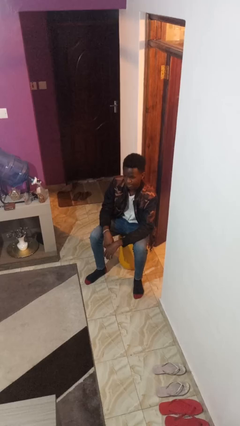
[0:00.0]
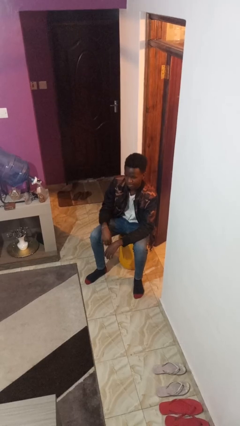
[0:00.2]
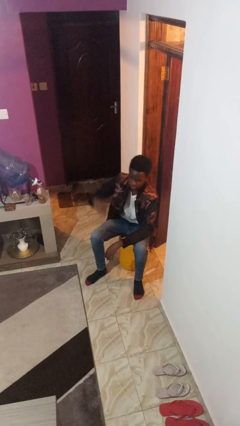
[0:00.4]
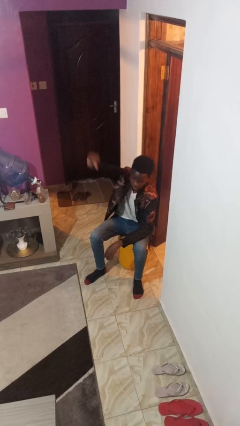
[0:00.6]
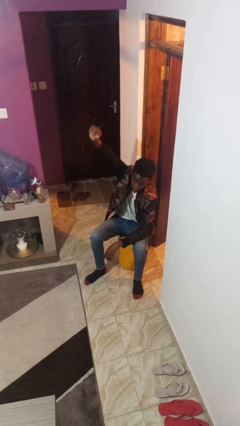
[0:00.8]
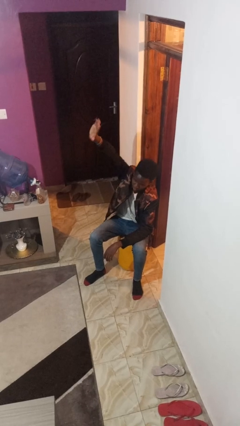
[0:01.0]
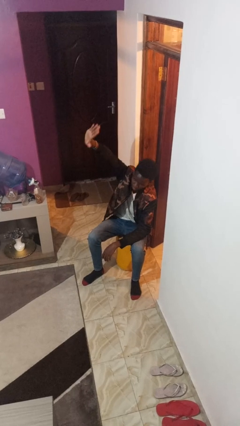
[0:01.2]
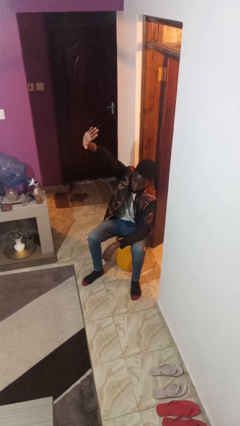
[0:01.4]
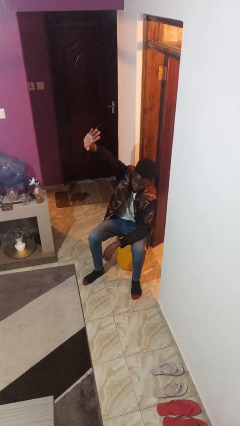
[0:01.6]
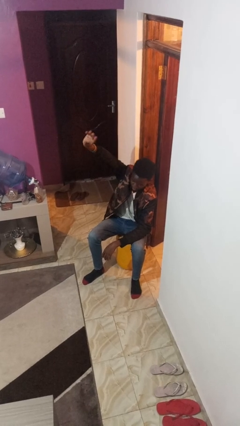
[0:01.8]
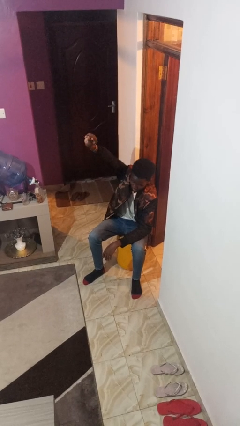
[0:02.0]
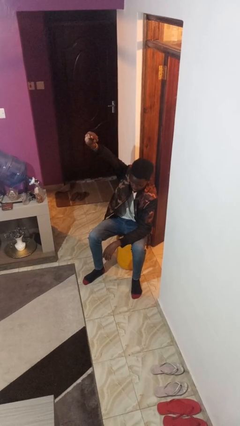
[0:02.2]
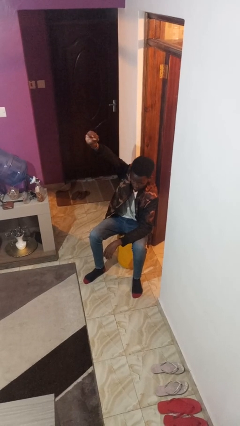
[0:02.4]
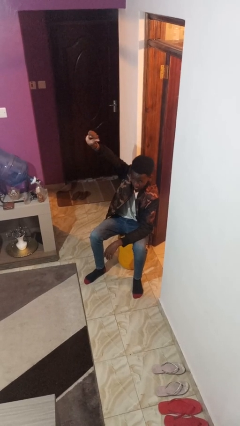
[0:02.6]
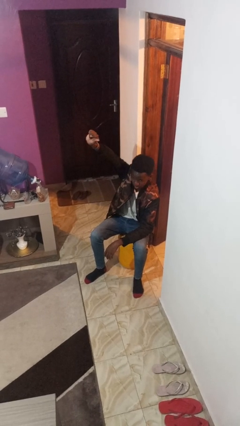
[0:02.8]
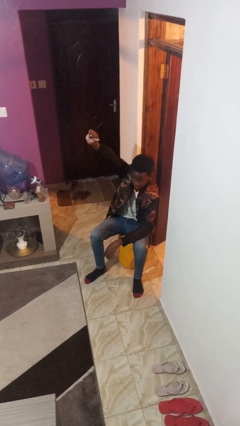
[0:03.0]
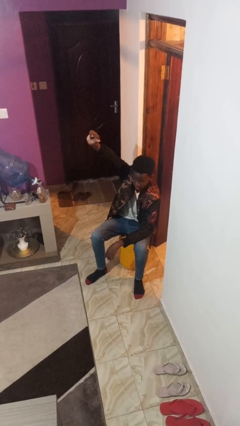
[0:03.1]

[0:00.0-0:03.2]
person gestures raise hand

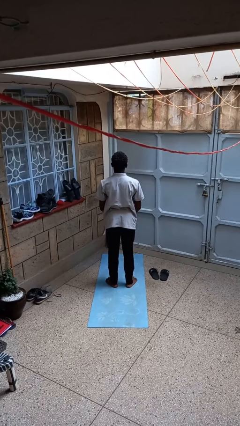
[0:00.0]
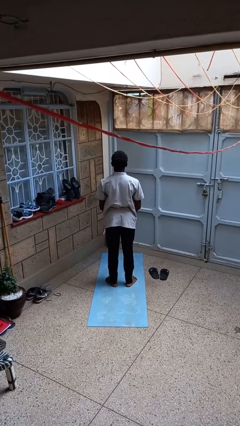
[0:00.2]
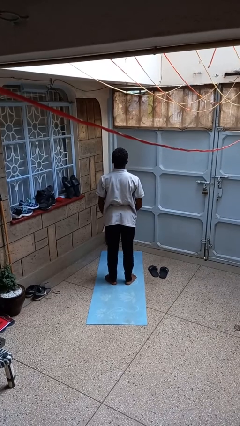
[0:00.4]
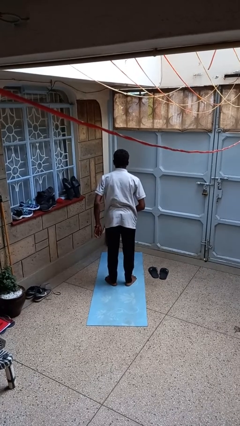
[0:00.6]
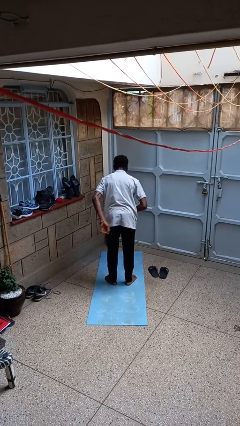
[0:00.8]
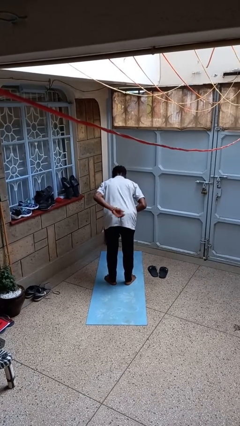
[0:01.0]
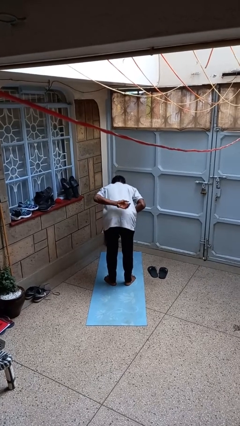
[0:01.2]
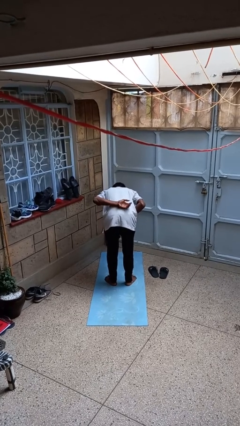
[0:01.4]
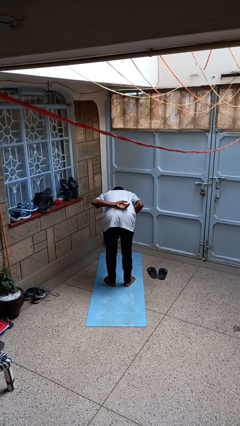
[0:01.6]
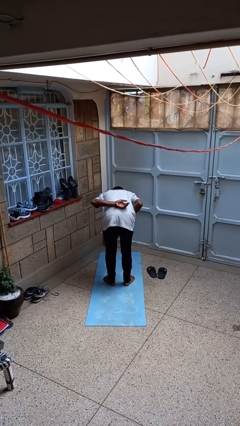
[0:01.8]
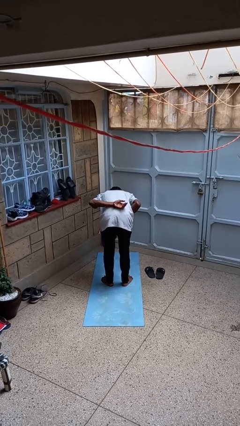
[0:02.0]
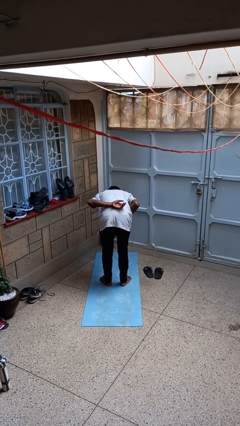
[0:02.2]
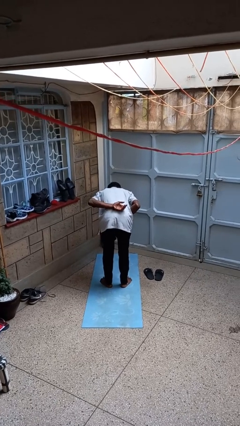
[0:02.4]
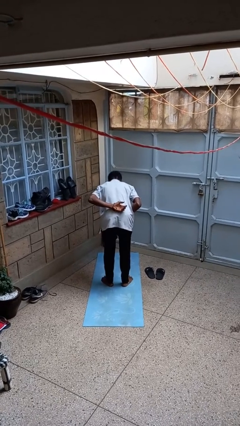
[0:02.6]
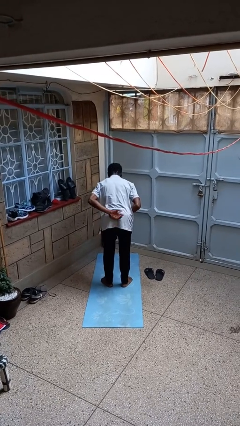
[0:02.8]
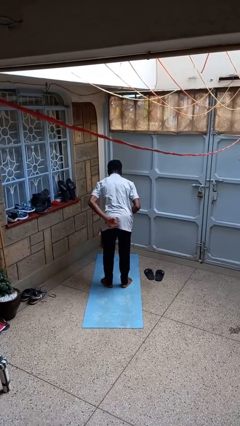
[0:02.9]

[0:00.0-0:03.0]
person bows

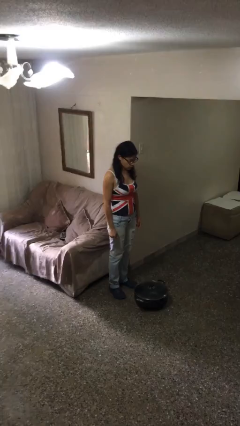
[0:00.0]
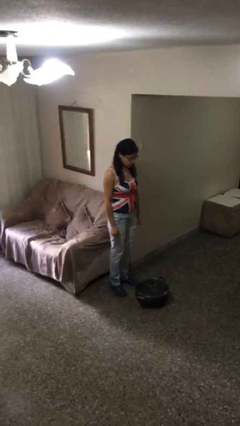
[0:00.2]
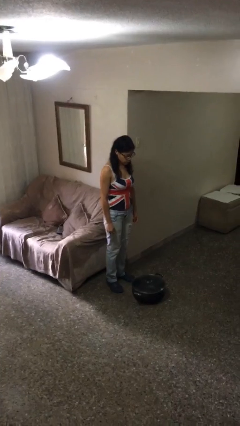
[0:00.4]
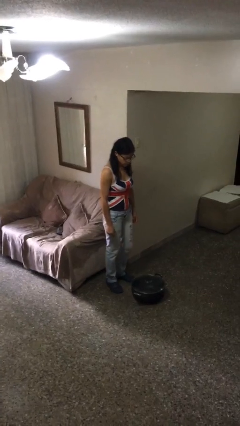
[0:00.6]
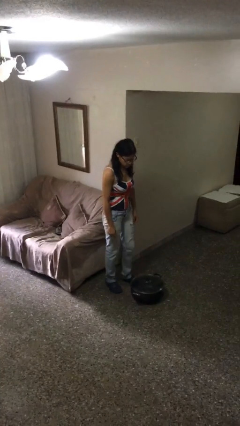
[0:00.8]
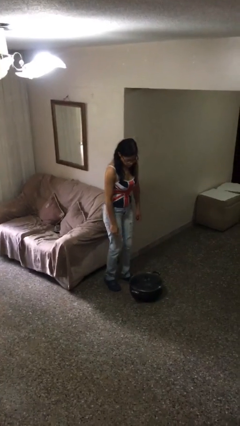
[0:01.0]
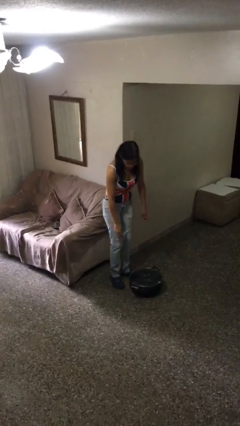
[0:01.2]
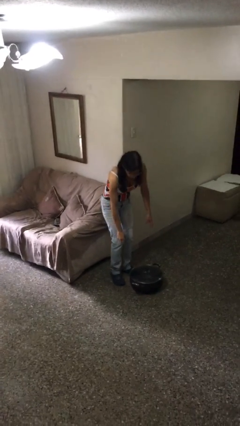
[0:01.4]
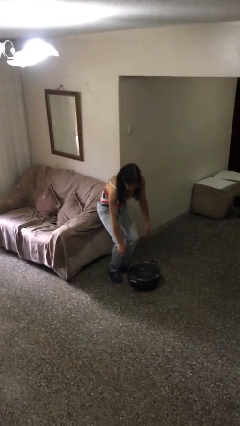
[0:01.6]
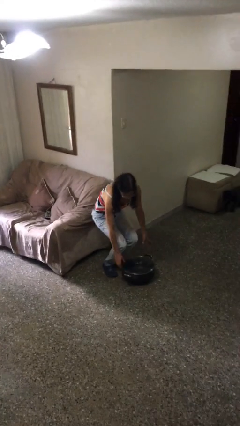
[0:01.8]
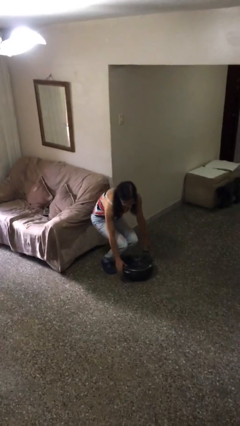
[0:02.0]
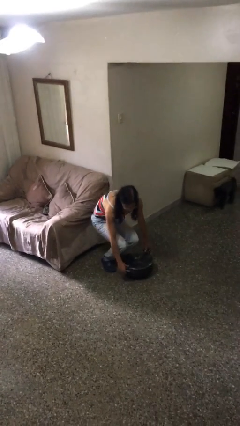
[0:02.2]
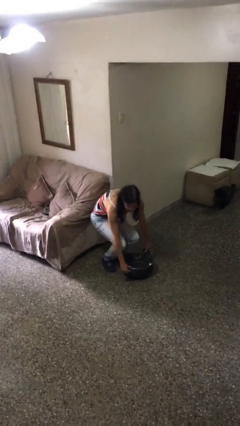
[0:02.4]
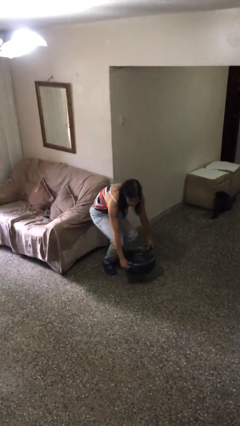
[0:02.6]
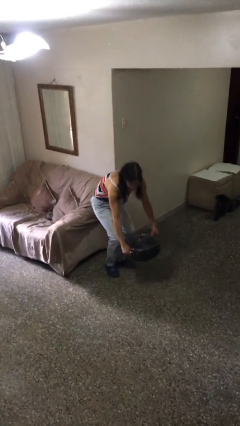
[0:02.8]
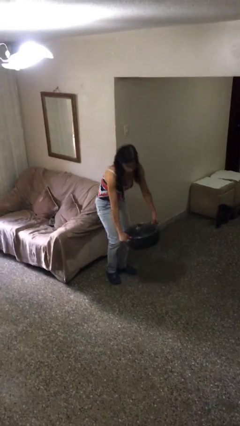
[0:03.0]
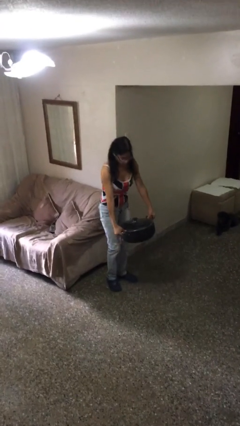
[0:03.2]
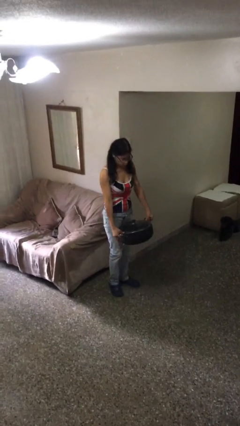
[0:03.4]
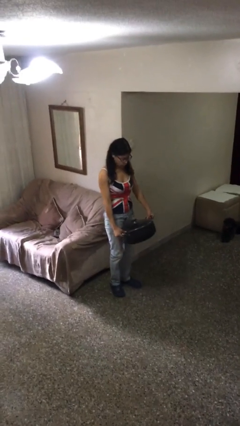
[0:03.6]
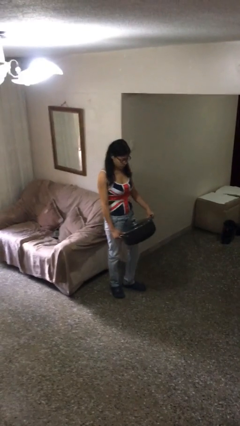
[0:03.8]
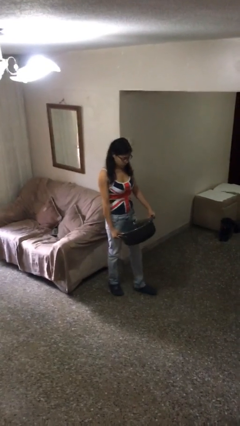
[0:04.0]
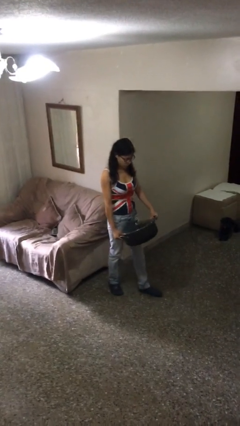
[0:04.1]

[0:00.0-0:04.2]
person picks up object from floor

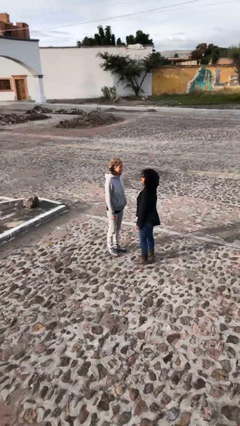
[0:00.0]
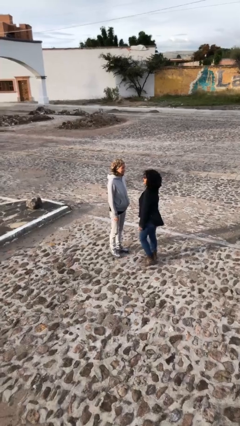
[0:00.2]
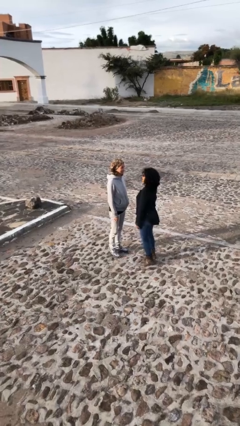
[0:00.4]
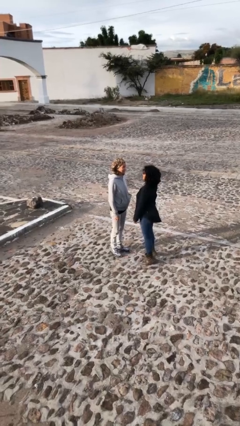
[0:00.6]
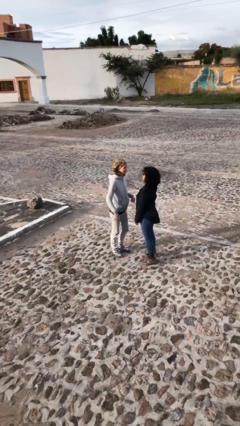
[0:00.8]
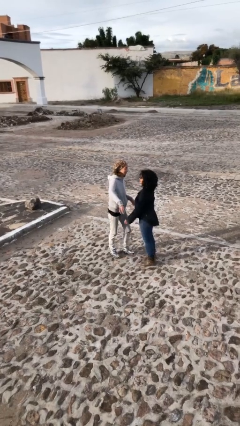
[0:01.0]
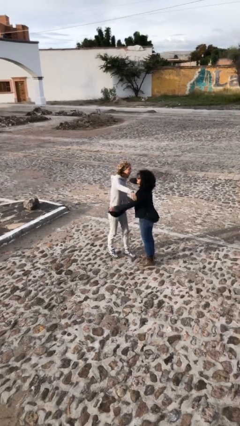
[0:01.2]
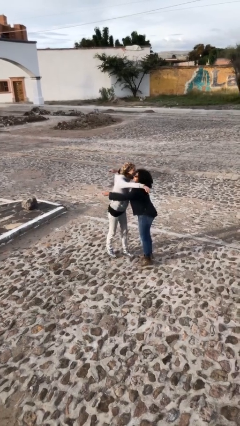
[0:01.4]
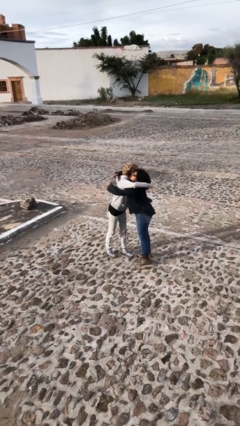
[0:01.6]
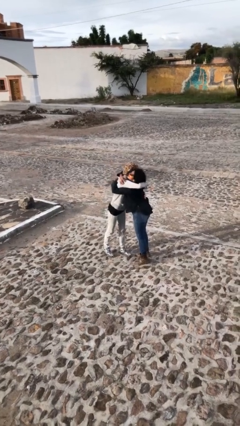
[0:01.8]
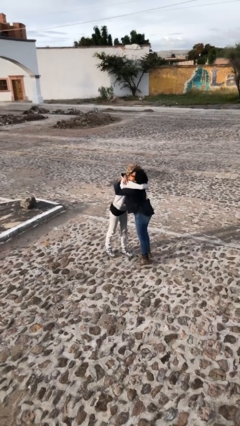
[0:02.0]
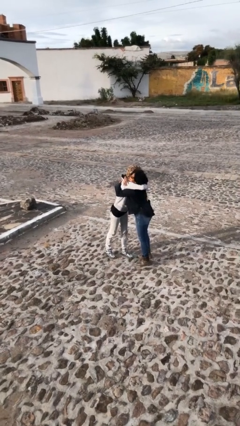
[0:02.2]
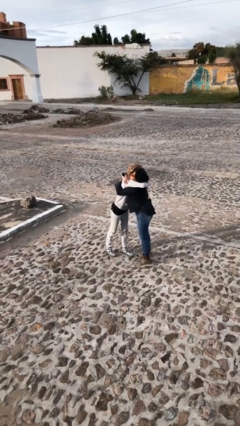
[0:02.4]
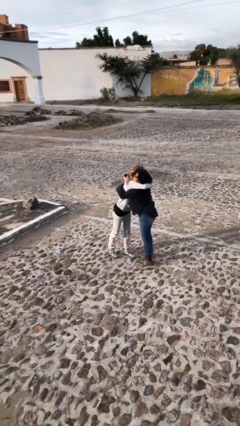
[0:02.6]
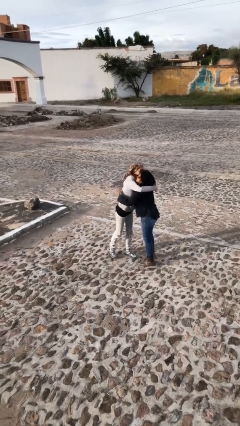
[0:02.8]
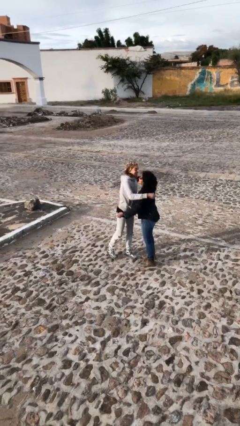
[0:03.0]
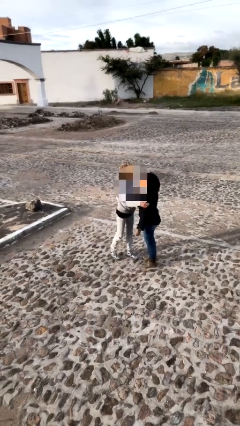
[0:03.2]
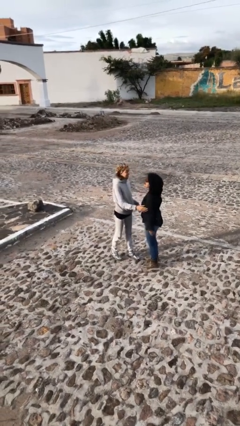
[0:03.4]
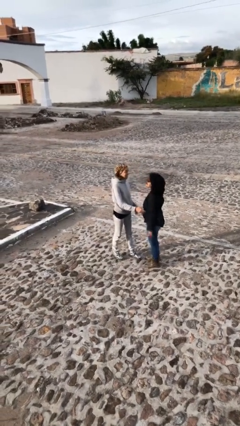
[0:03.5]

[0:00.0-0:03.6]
person embraces person

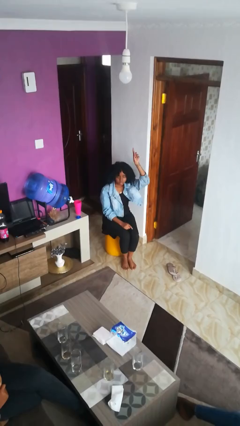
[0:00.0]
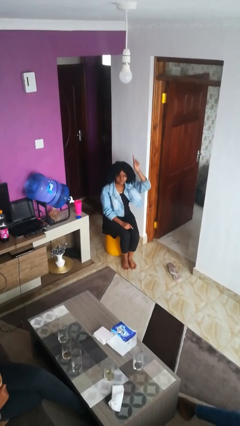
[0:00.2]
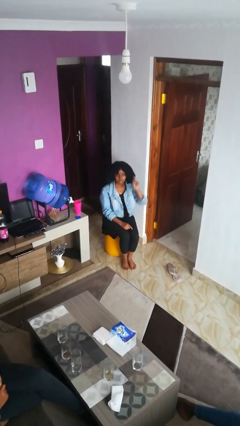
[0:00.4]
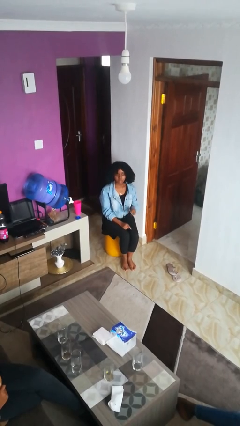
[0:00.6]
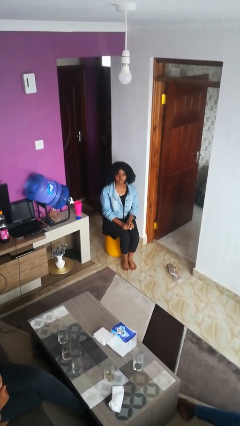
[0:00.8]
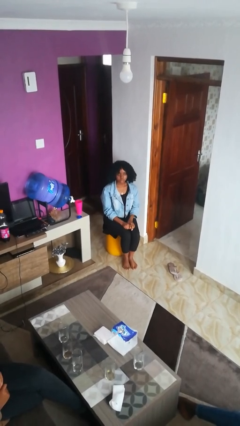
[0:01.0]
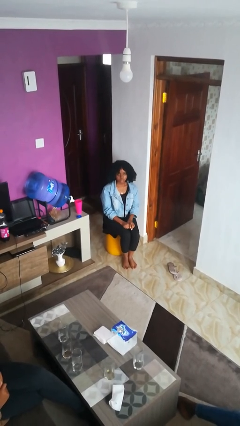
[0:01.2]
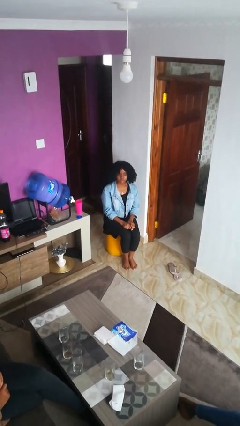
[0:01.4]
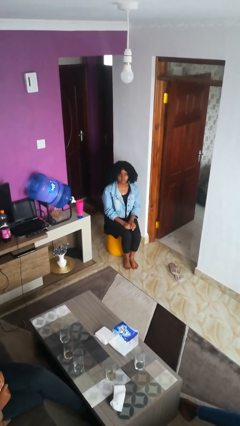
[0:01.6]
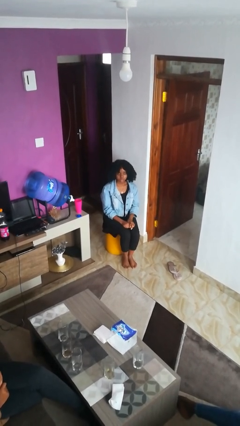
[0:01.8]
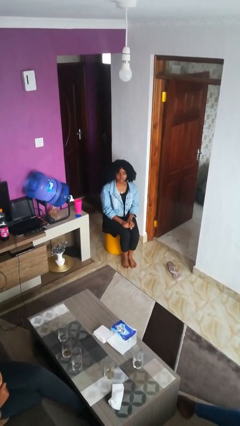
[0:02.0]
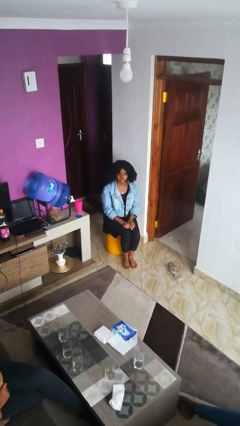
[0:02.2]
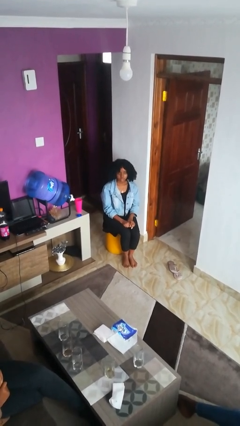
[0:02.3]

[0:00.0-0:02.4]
person gestures lower hand

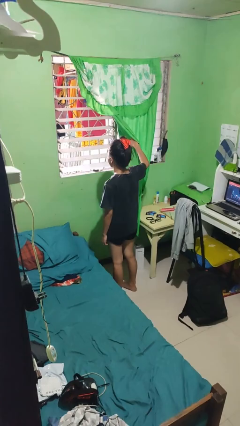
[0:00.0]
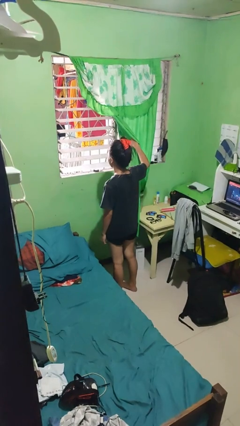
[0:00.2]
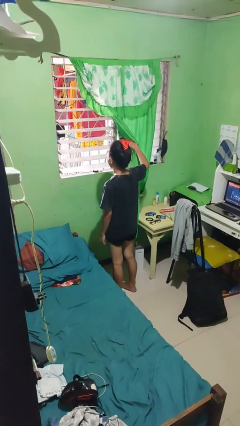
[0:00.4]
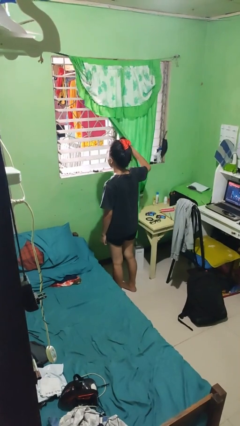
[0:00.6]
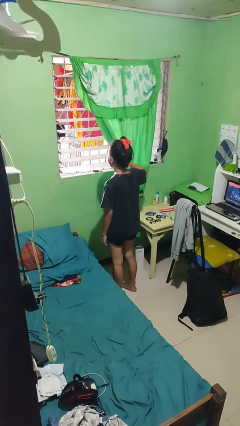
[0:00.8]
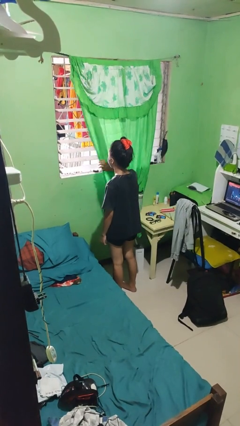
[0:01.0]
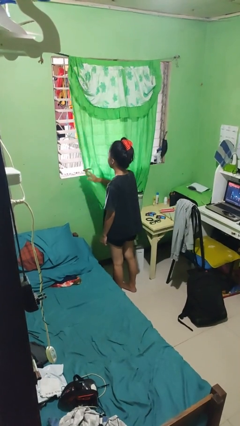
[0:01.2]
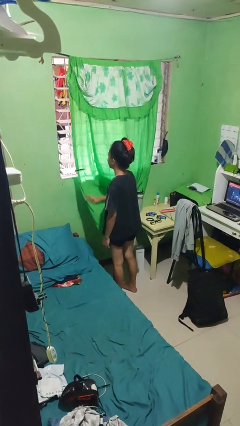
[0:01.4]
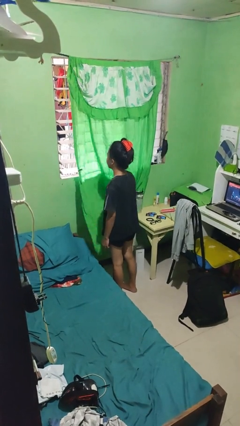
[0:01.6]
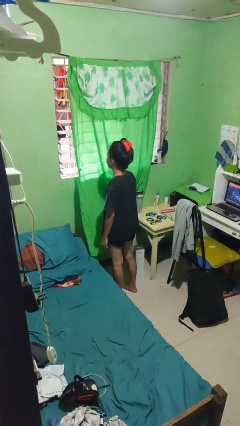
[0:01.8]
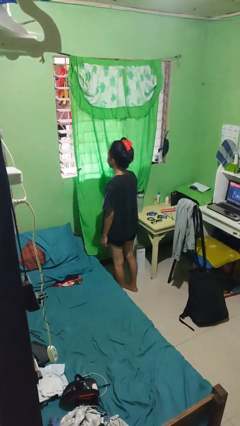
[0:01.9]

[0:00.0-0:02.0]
person closes curtains
